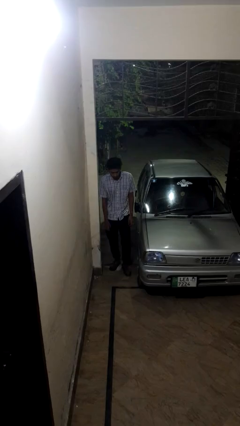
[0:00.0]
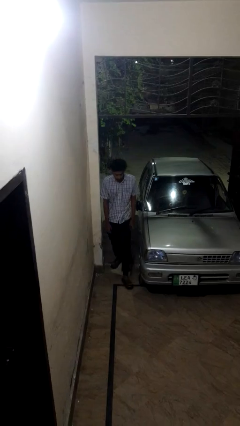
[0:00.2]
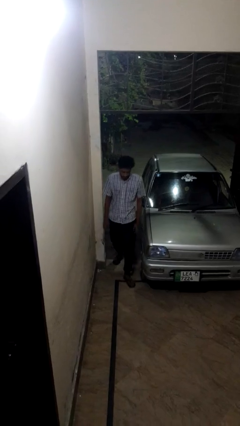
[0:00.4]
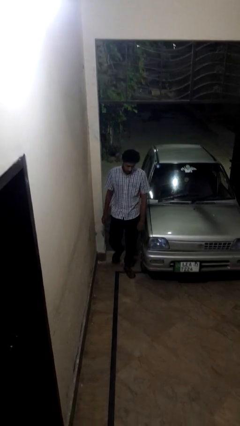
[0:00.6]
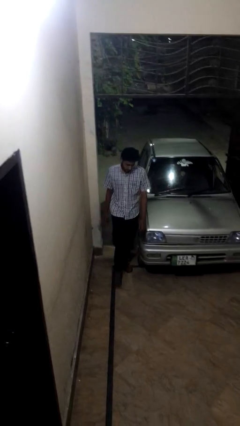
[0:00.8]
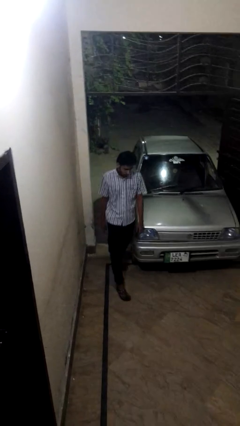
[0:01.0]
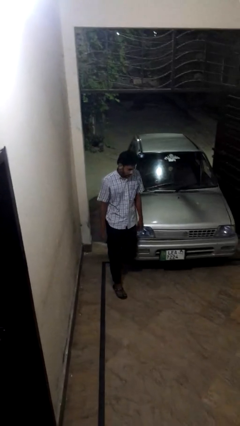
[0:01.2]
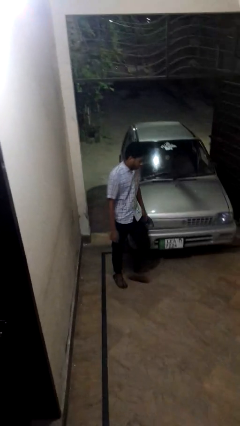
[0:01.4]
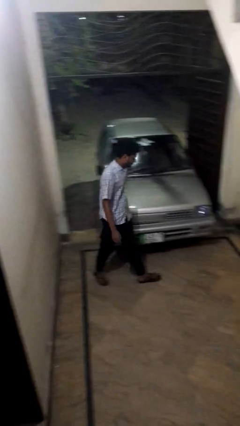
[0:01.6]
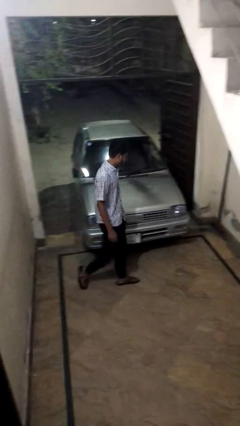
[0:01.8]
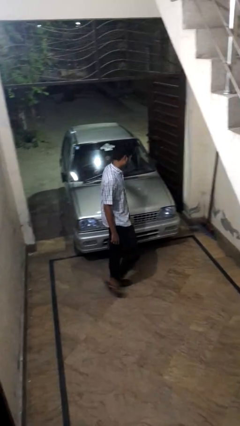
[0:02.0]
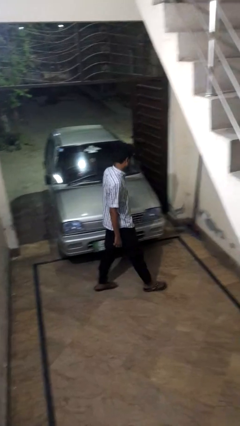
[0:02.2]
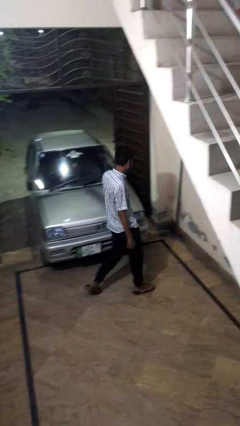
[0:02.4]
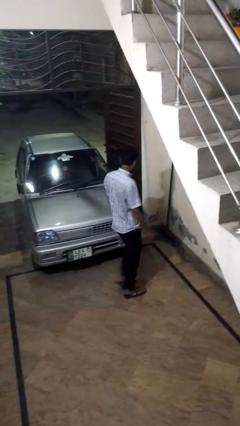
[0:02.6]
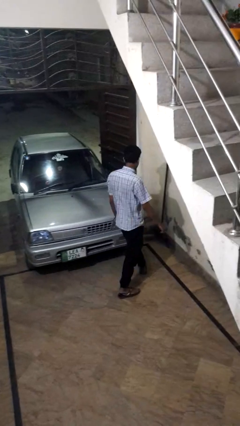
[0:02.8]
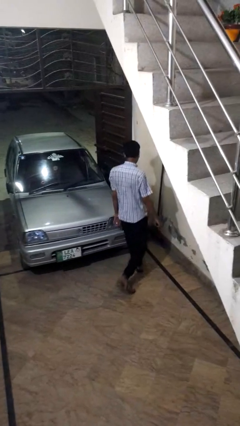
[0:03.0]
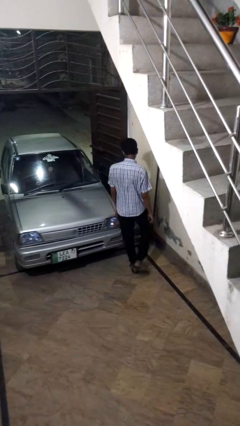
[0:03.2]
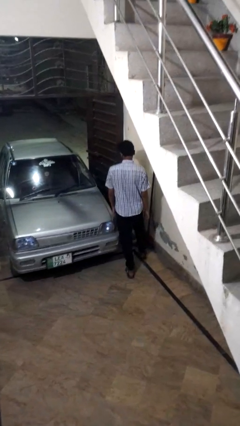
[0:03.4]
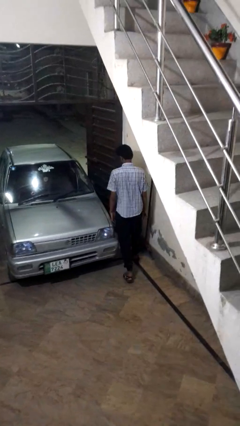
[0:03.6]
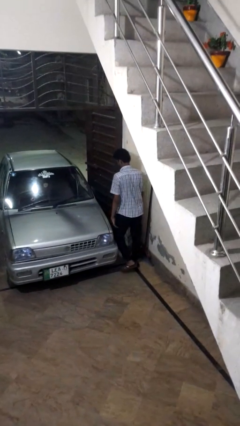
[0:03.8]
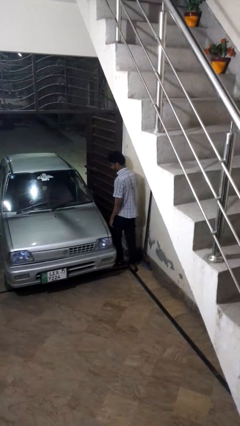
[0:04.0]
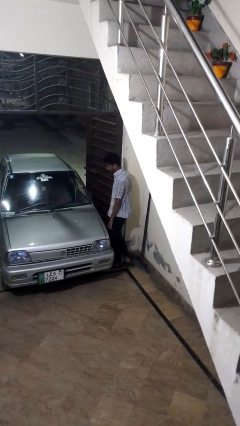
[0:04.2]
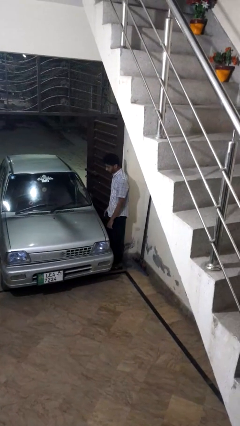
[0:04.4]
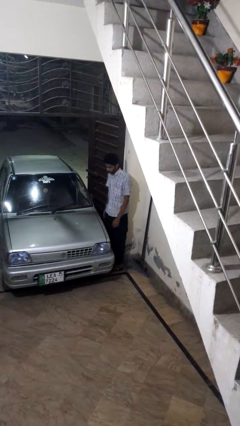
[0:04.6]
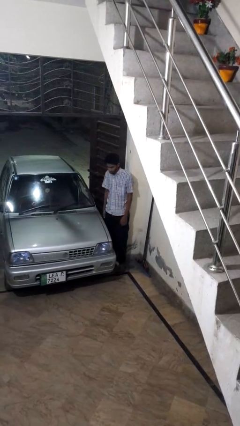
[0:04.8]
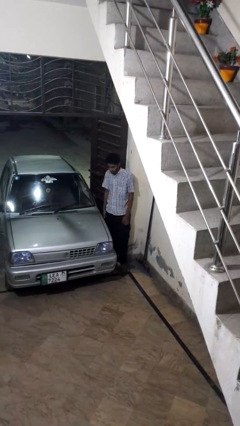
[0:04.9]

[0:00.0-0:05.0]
person walks around car

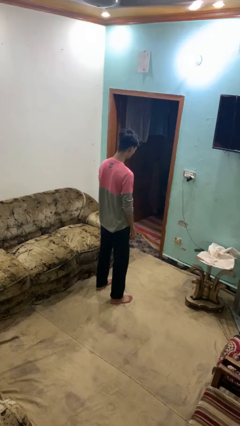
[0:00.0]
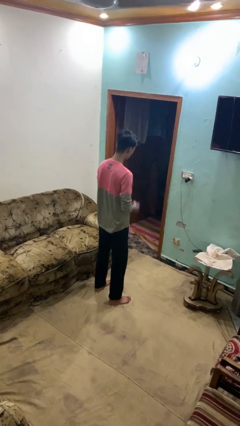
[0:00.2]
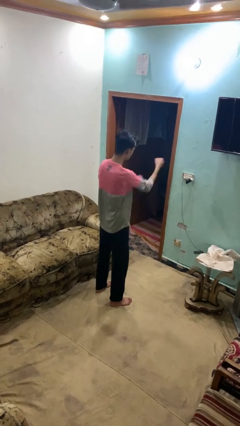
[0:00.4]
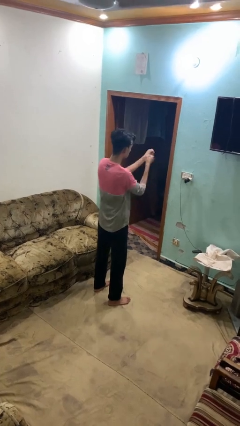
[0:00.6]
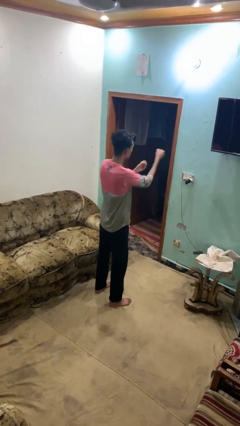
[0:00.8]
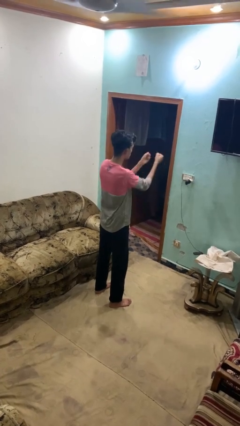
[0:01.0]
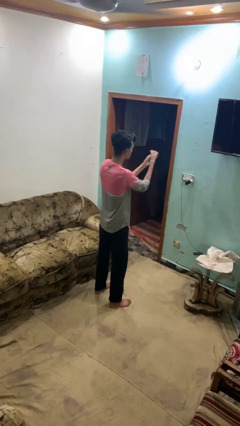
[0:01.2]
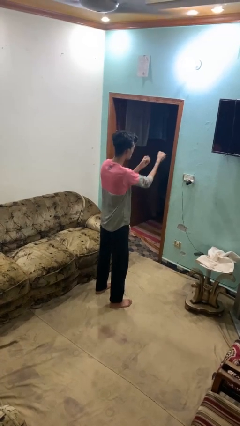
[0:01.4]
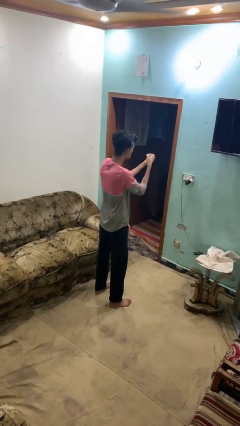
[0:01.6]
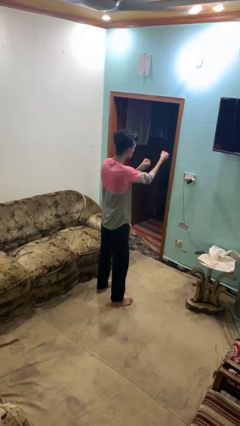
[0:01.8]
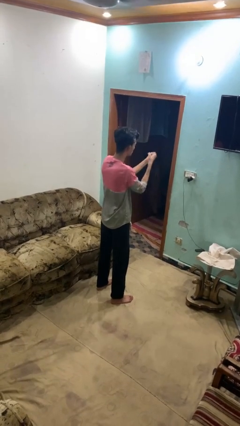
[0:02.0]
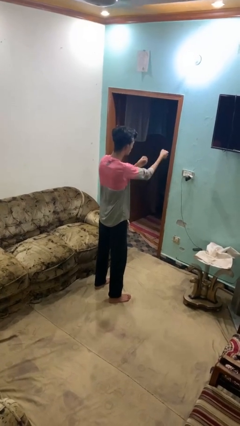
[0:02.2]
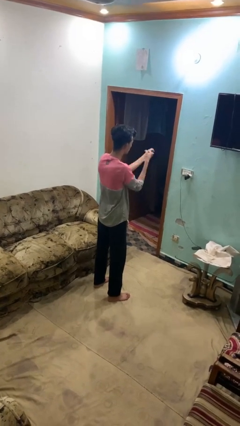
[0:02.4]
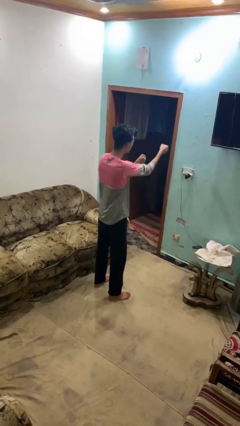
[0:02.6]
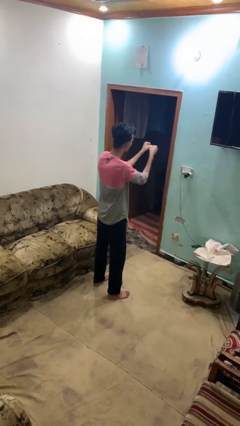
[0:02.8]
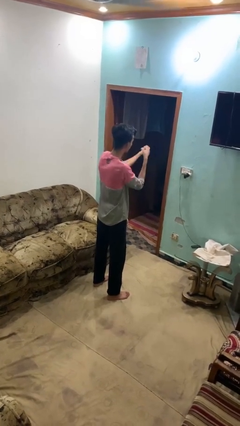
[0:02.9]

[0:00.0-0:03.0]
person punches

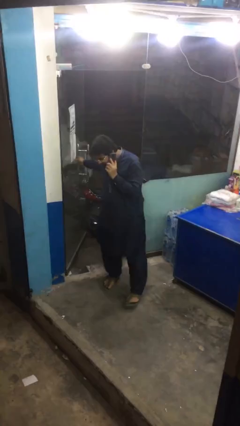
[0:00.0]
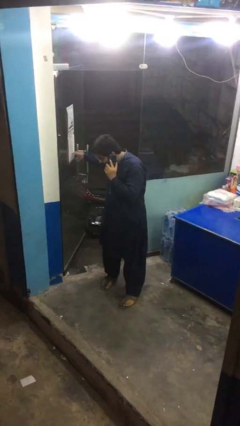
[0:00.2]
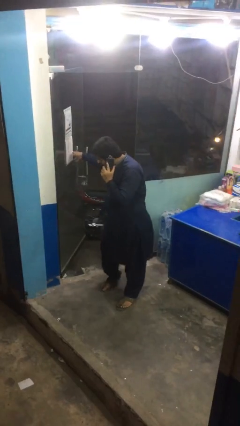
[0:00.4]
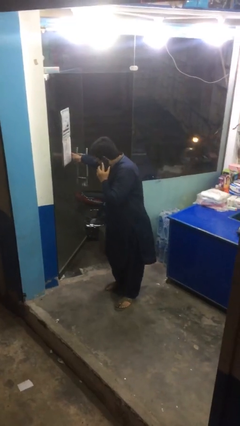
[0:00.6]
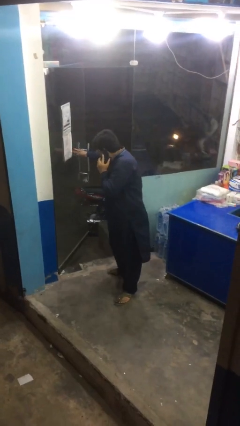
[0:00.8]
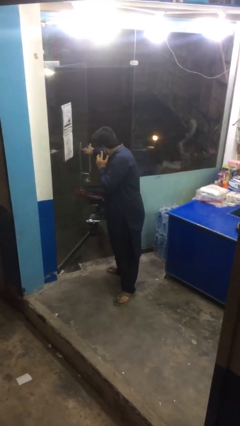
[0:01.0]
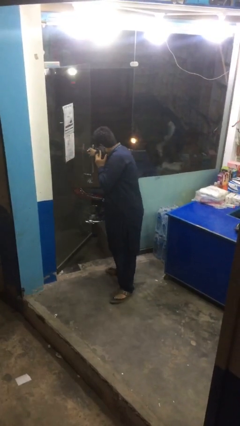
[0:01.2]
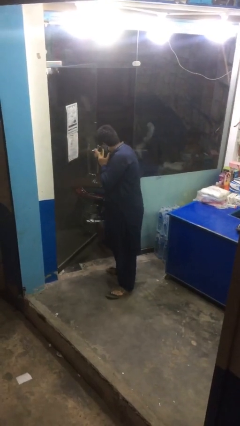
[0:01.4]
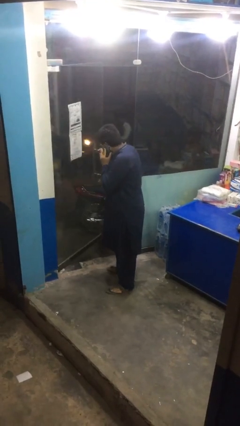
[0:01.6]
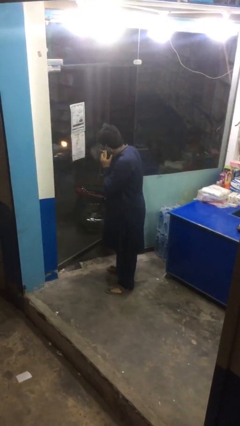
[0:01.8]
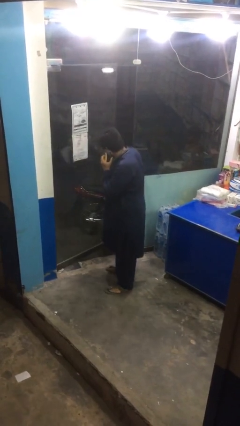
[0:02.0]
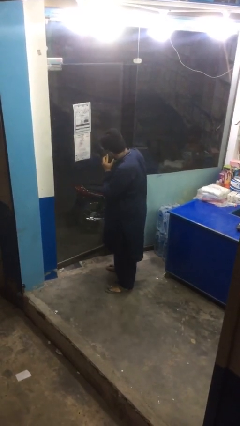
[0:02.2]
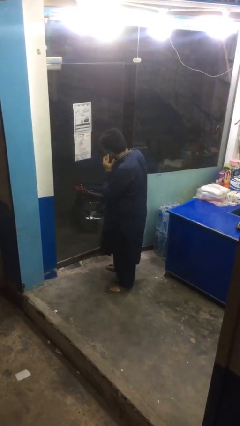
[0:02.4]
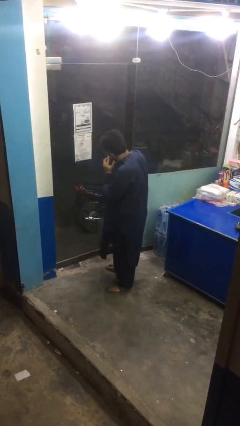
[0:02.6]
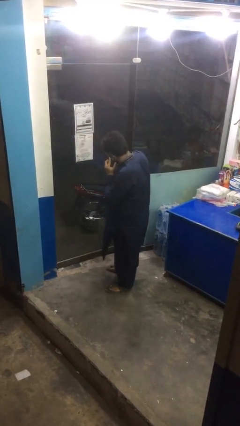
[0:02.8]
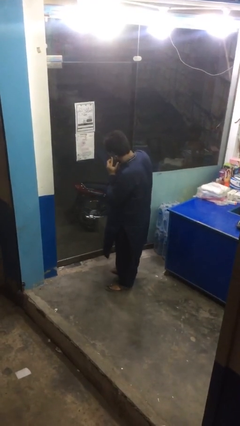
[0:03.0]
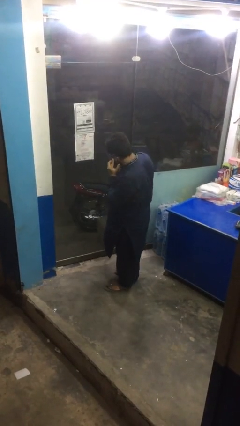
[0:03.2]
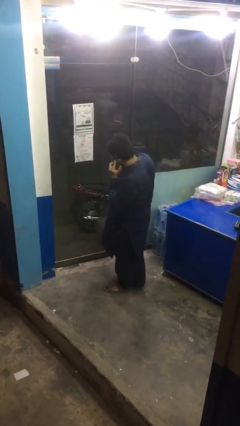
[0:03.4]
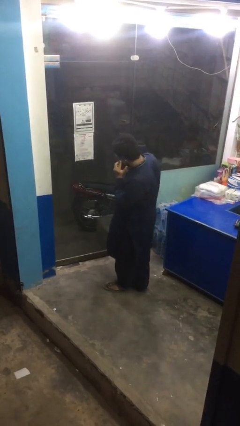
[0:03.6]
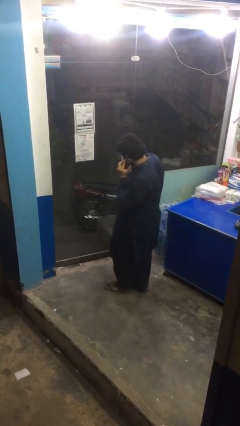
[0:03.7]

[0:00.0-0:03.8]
person closes facility door

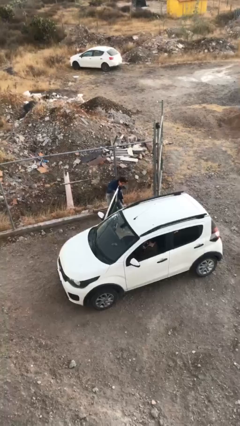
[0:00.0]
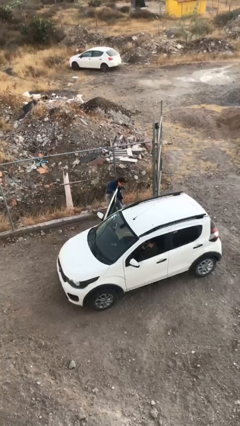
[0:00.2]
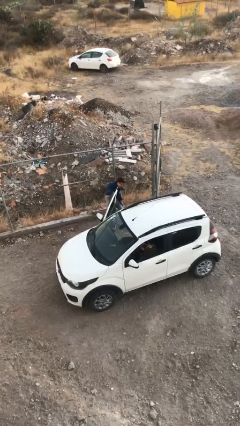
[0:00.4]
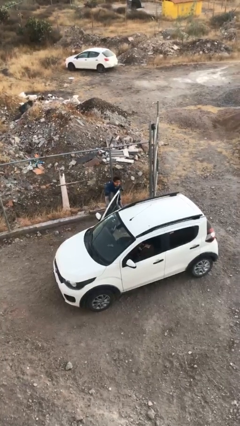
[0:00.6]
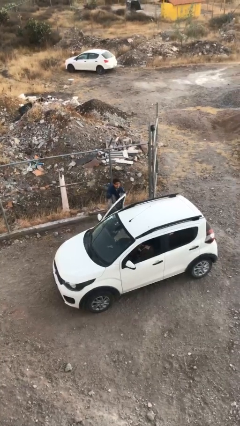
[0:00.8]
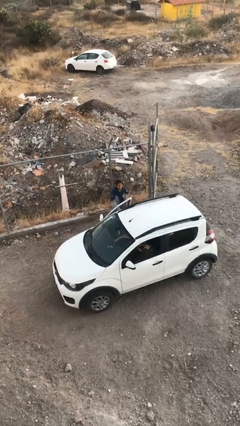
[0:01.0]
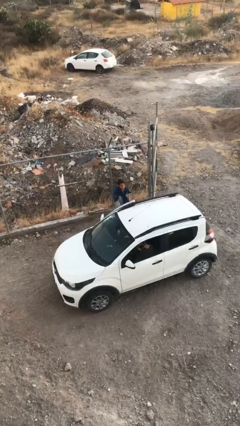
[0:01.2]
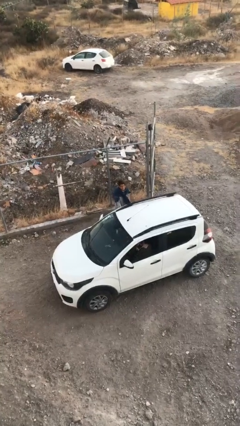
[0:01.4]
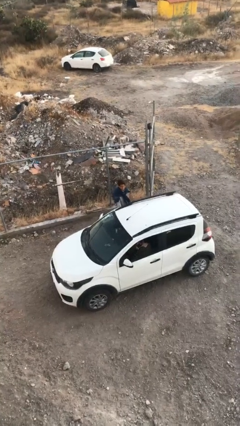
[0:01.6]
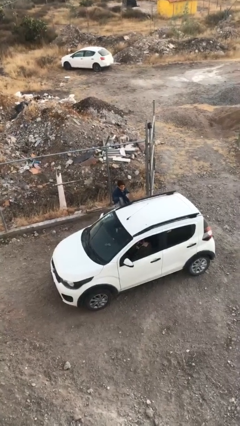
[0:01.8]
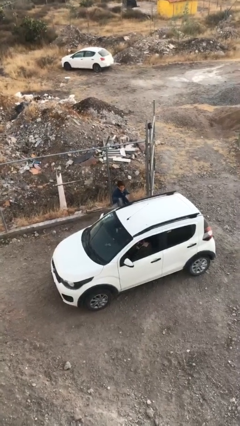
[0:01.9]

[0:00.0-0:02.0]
person closes car door

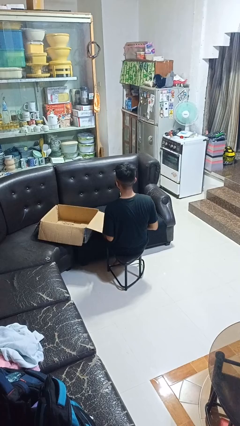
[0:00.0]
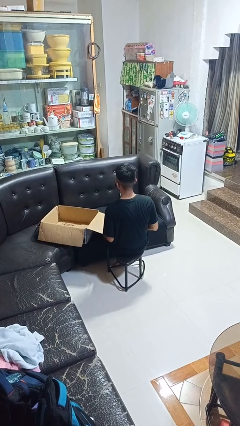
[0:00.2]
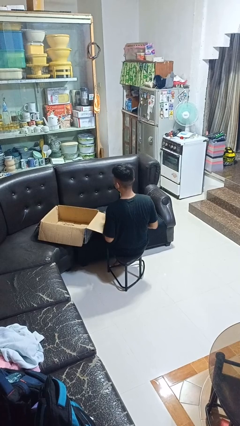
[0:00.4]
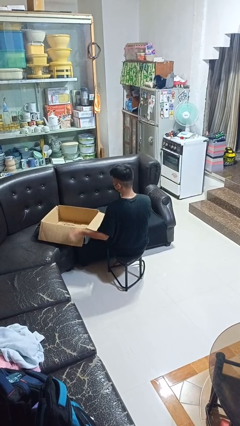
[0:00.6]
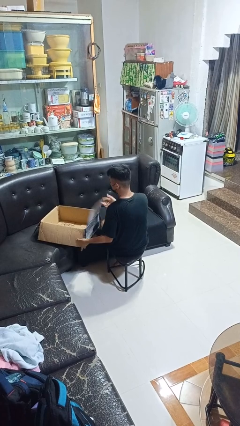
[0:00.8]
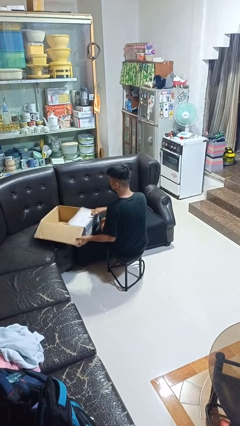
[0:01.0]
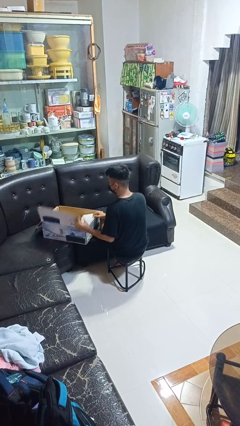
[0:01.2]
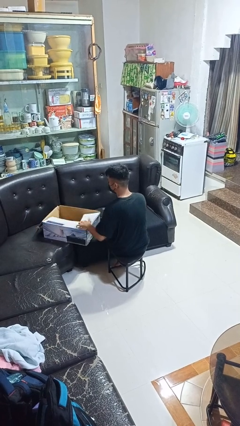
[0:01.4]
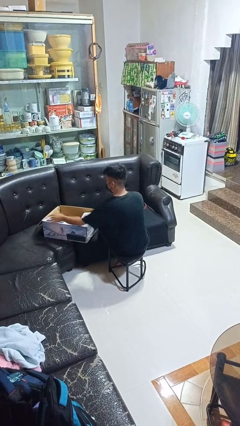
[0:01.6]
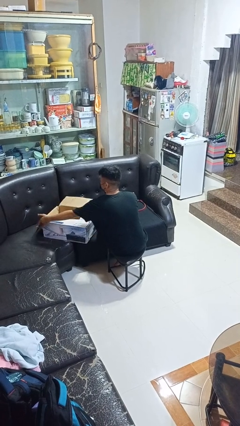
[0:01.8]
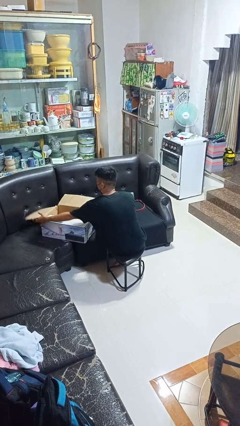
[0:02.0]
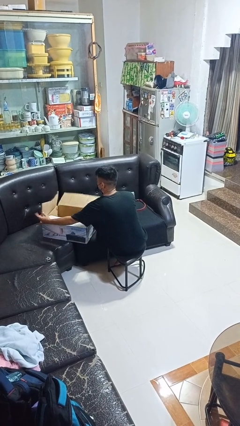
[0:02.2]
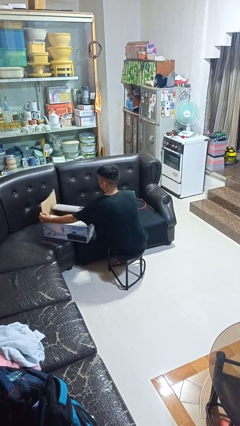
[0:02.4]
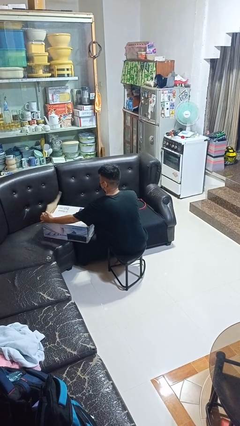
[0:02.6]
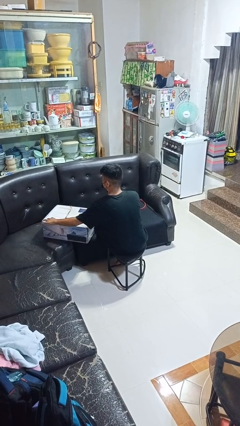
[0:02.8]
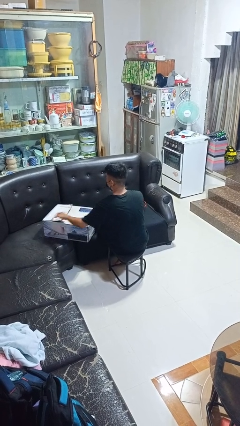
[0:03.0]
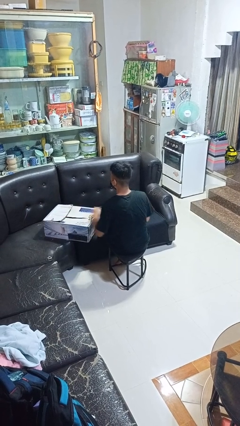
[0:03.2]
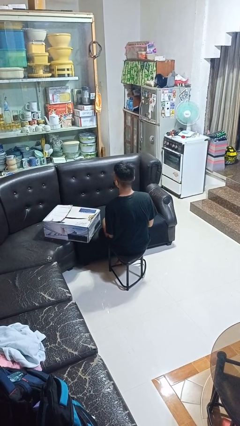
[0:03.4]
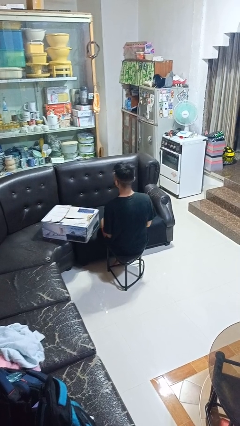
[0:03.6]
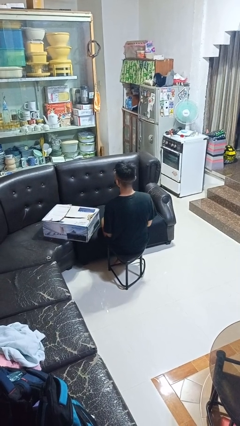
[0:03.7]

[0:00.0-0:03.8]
person closes box
